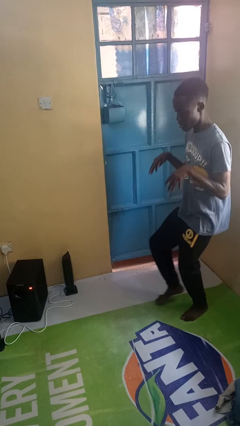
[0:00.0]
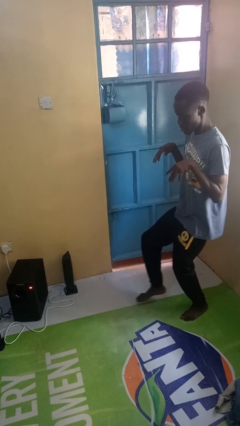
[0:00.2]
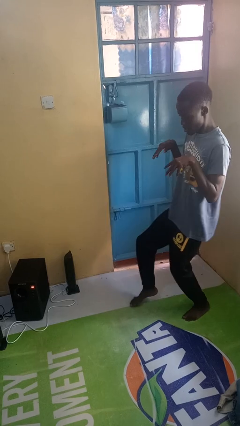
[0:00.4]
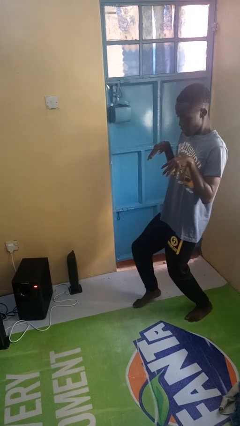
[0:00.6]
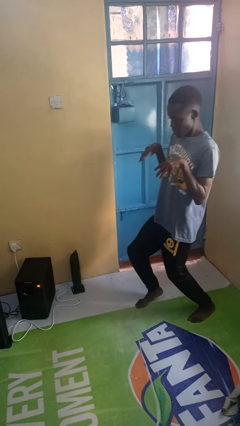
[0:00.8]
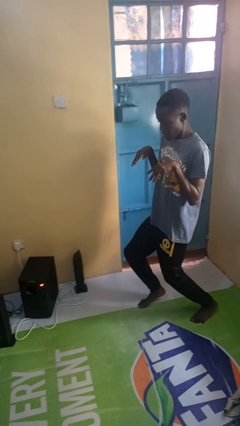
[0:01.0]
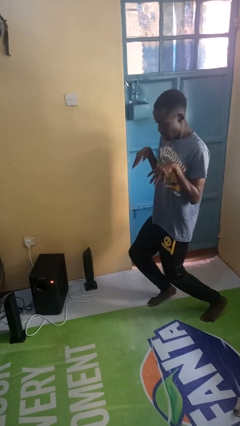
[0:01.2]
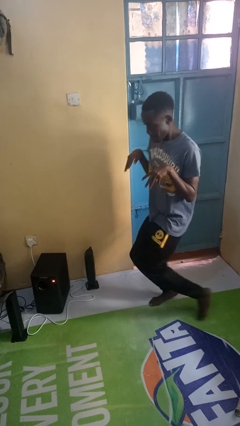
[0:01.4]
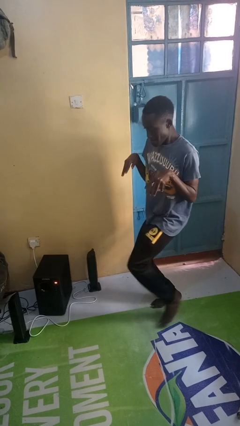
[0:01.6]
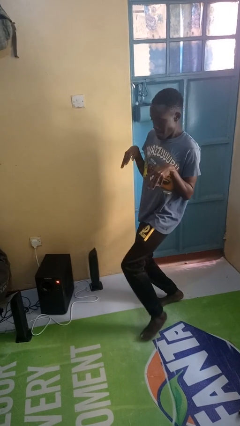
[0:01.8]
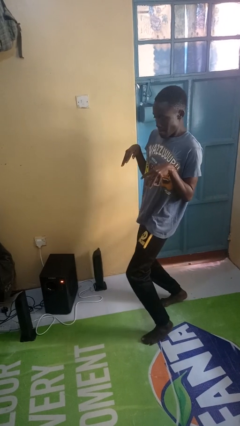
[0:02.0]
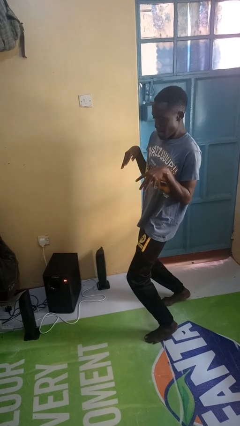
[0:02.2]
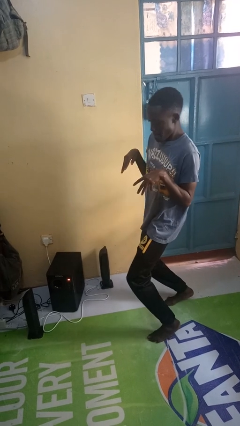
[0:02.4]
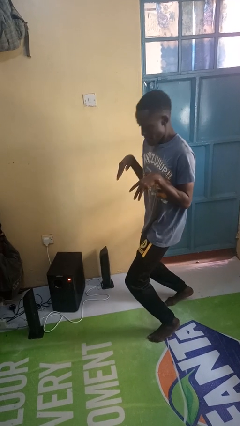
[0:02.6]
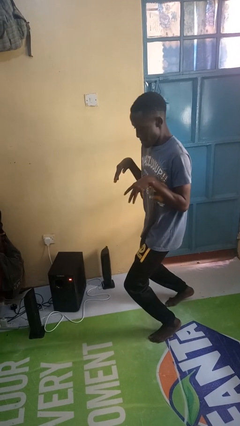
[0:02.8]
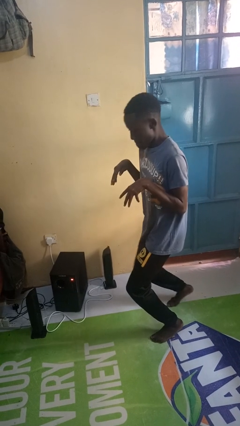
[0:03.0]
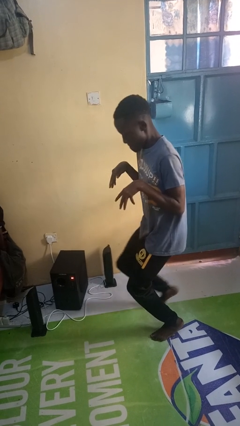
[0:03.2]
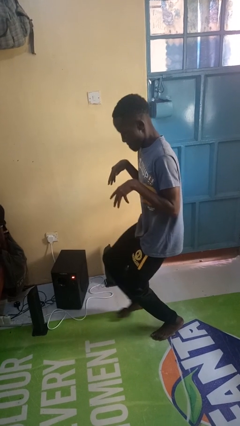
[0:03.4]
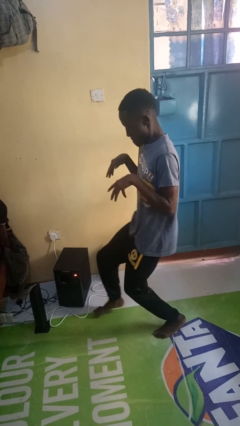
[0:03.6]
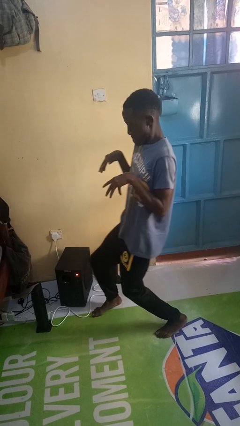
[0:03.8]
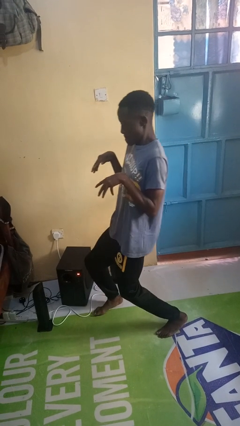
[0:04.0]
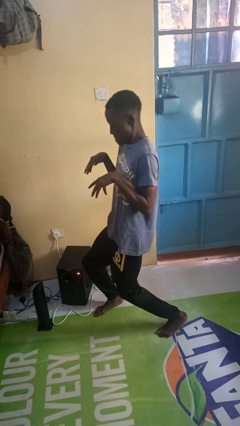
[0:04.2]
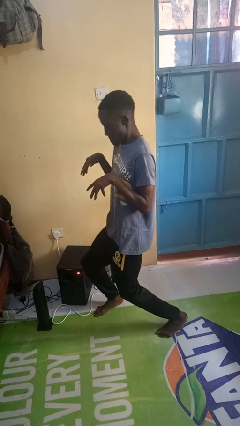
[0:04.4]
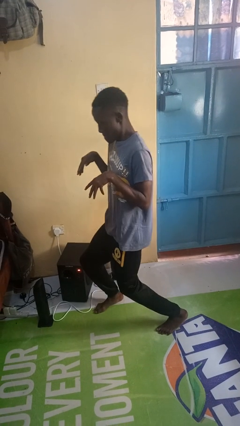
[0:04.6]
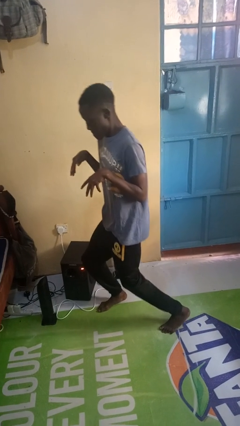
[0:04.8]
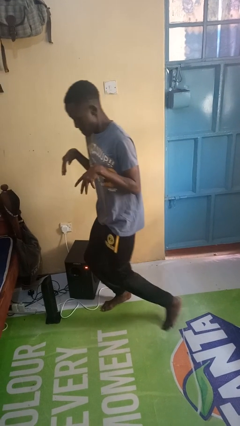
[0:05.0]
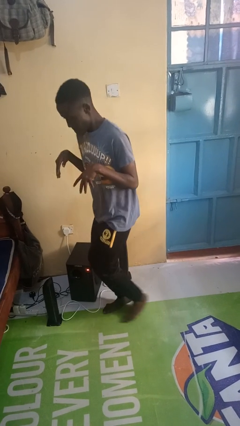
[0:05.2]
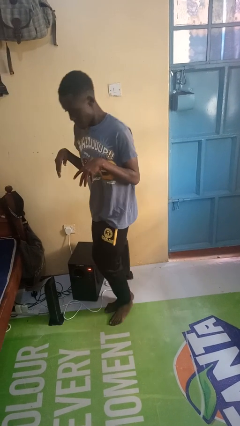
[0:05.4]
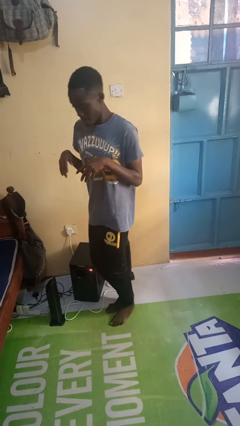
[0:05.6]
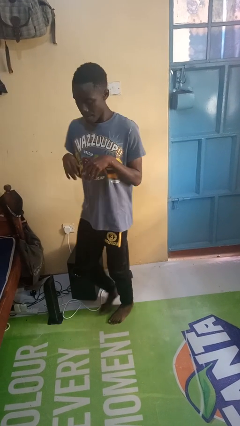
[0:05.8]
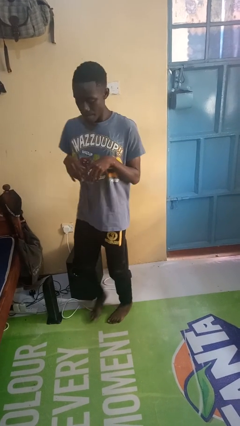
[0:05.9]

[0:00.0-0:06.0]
person walks tiptoe

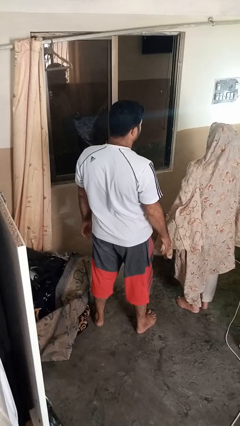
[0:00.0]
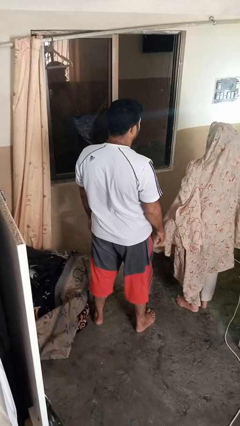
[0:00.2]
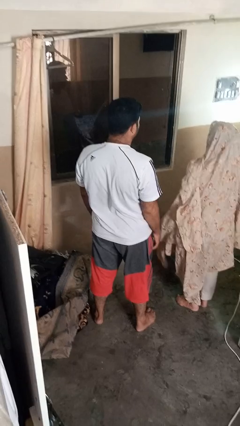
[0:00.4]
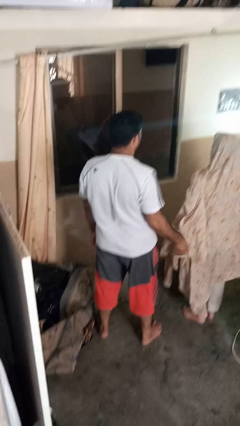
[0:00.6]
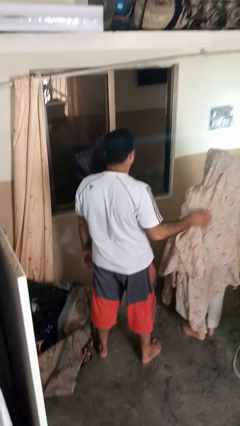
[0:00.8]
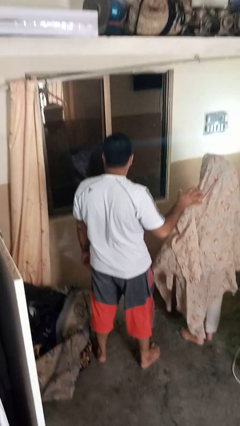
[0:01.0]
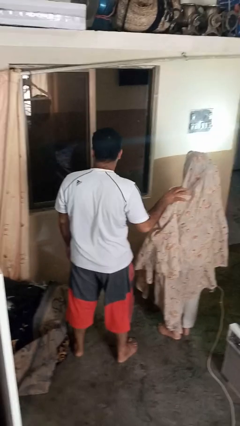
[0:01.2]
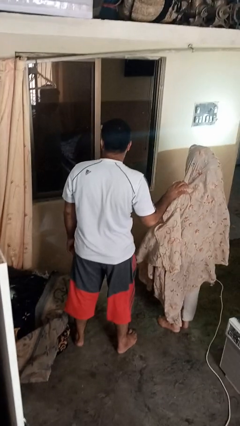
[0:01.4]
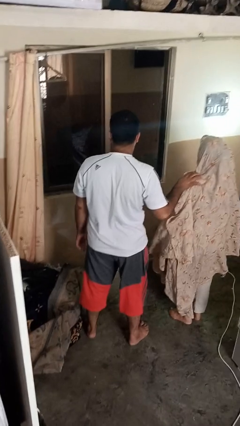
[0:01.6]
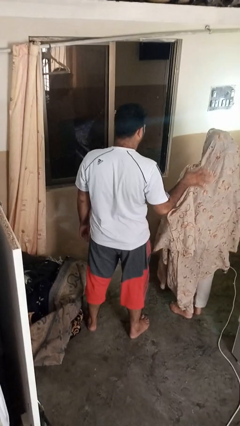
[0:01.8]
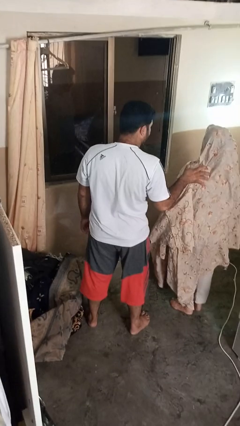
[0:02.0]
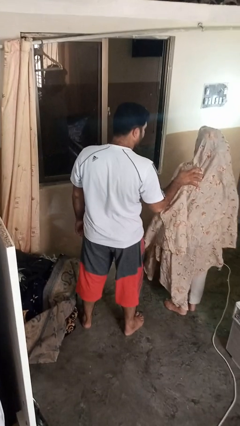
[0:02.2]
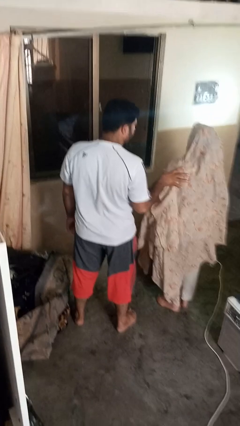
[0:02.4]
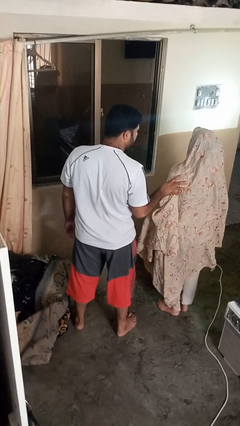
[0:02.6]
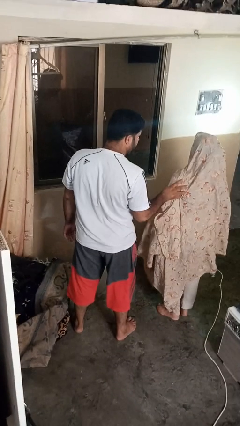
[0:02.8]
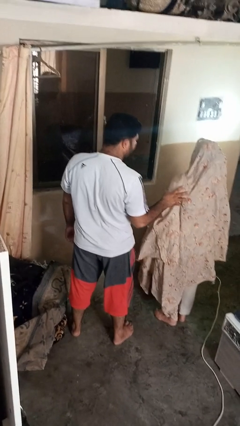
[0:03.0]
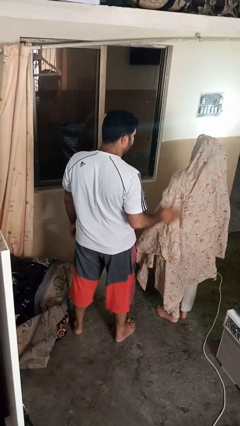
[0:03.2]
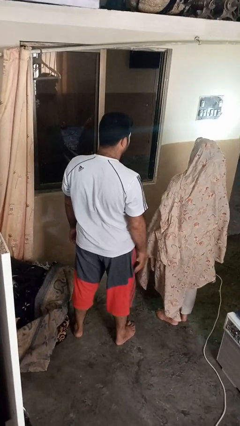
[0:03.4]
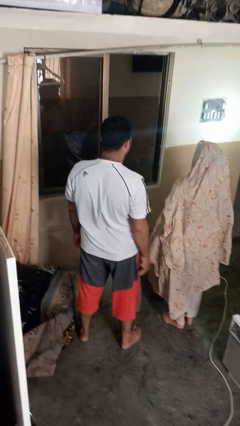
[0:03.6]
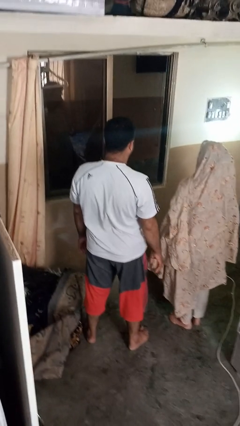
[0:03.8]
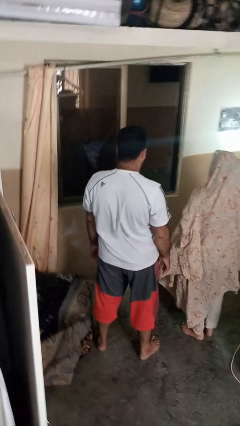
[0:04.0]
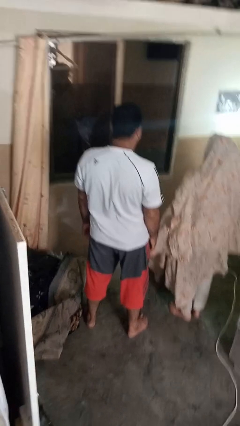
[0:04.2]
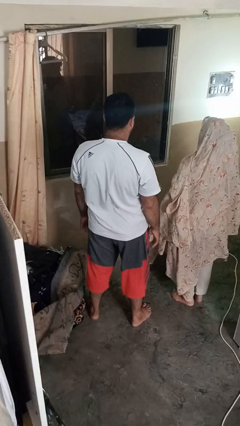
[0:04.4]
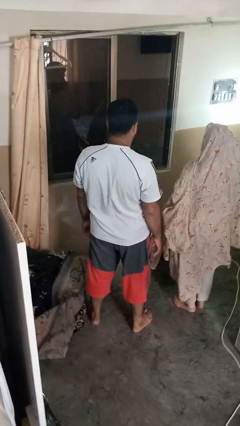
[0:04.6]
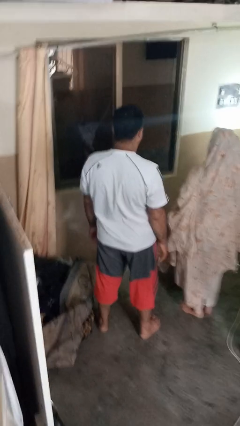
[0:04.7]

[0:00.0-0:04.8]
person grabs person by bicep

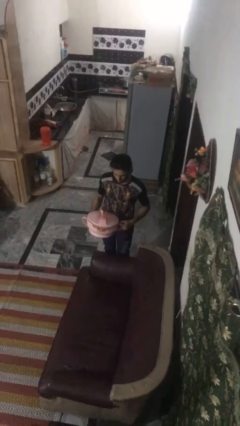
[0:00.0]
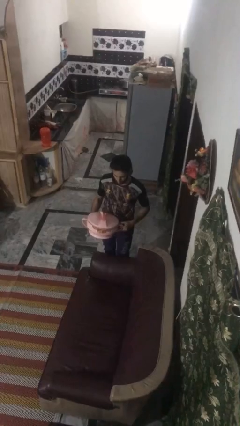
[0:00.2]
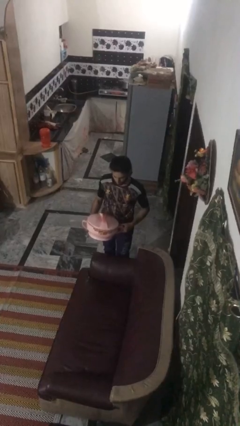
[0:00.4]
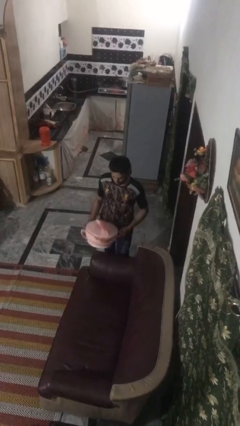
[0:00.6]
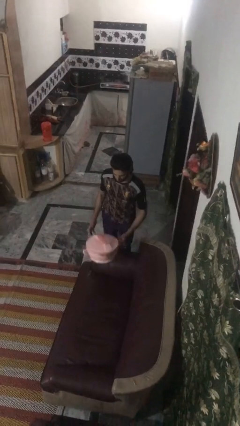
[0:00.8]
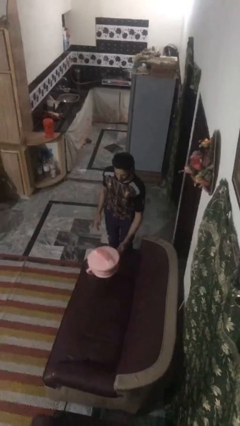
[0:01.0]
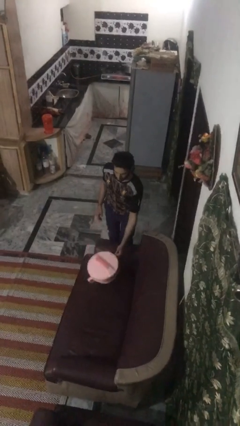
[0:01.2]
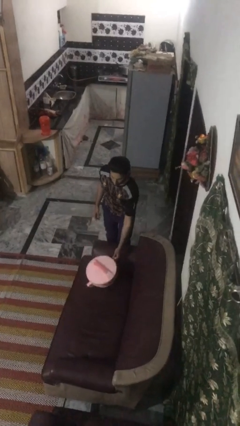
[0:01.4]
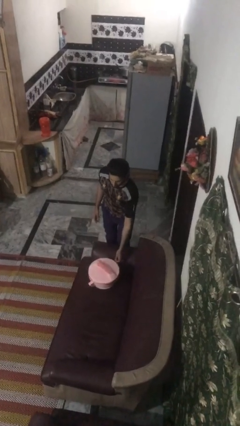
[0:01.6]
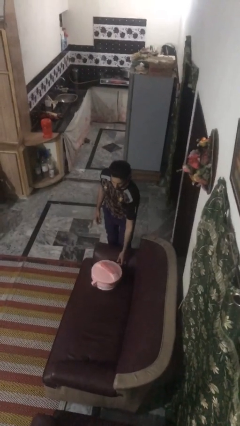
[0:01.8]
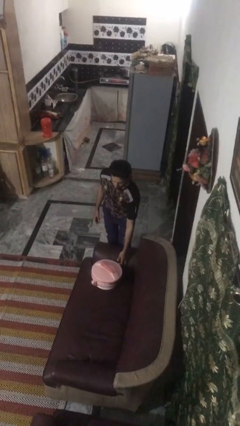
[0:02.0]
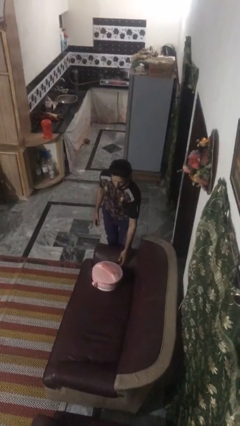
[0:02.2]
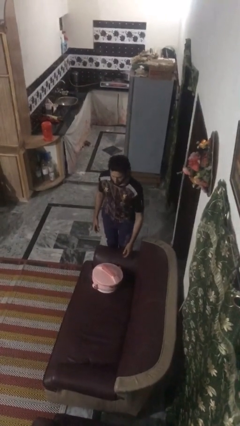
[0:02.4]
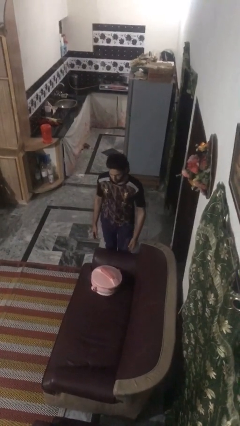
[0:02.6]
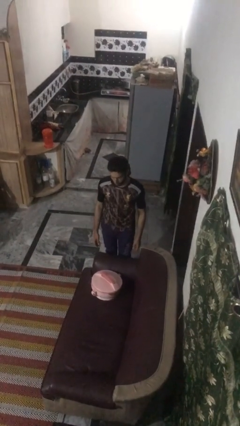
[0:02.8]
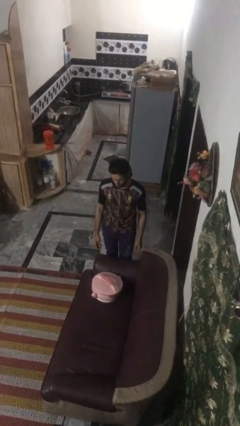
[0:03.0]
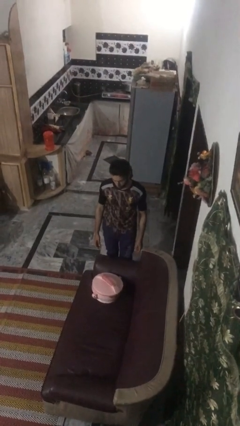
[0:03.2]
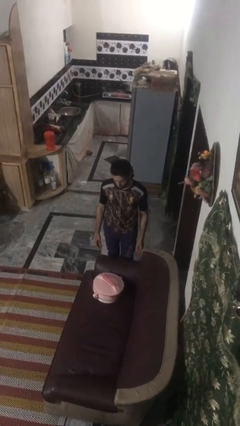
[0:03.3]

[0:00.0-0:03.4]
person puts down object on couch

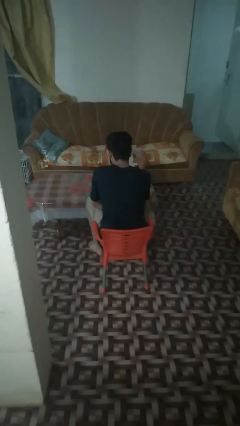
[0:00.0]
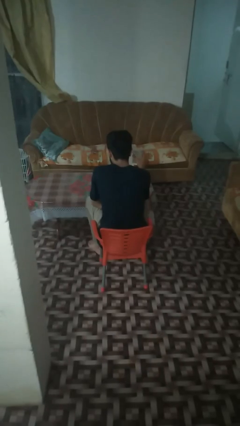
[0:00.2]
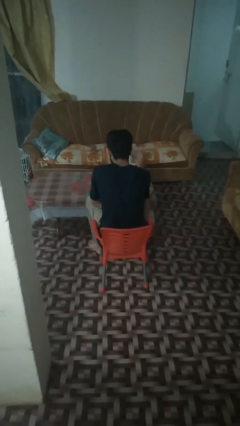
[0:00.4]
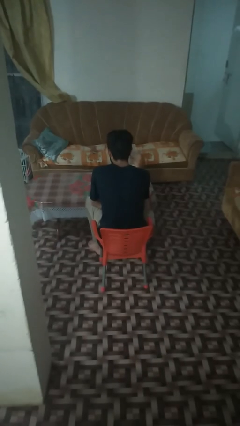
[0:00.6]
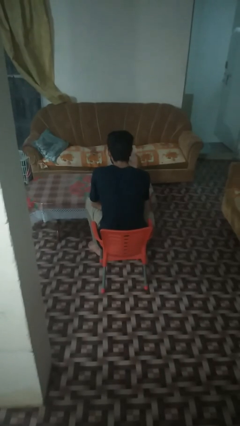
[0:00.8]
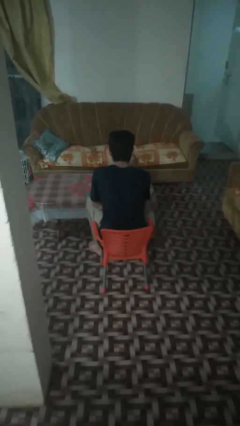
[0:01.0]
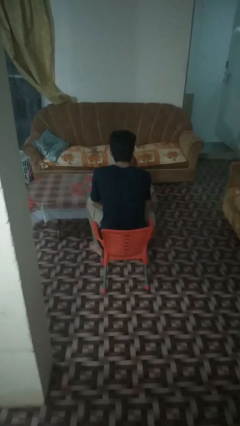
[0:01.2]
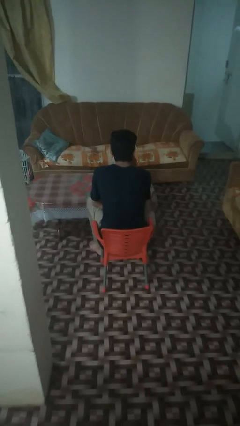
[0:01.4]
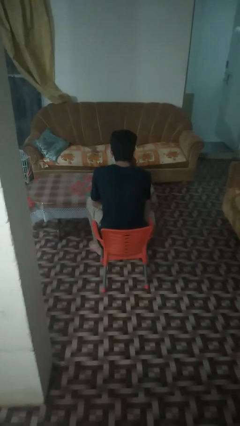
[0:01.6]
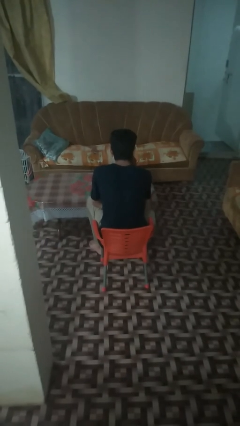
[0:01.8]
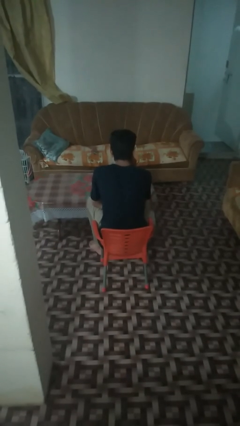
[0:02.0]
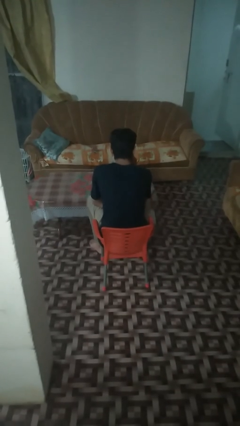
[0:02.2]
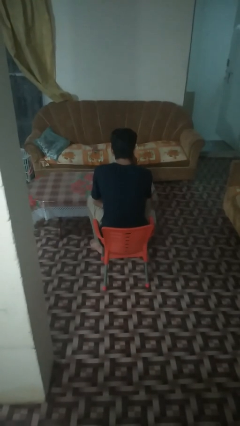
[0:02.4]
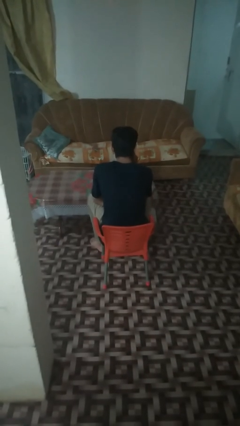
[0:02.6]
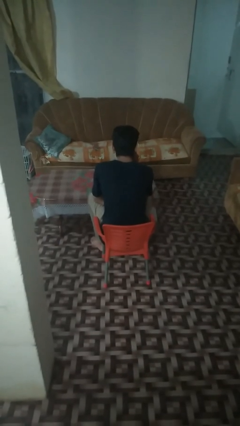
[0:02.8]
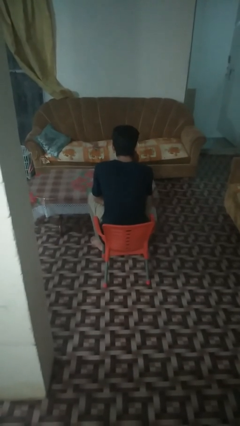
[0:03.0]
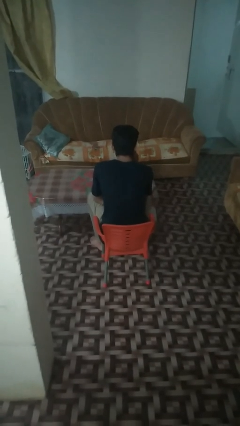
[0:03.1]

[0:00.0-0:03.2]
person drinks from shotglass

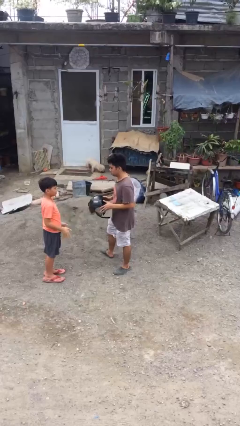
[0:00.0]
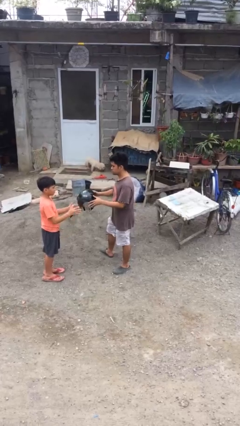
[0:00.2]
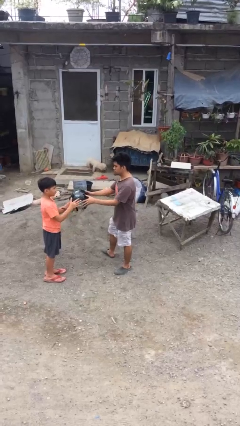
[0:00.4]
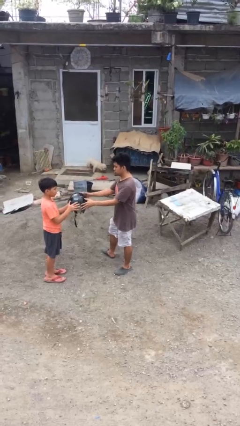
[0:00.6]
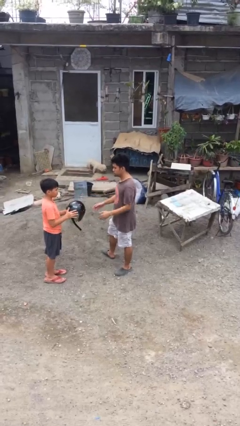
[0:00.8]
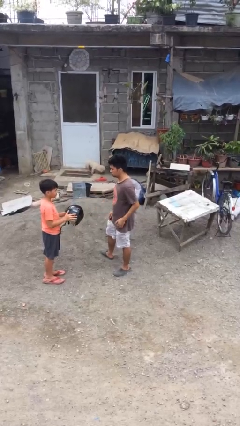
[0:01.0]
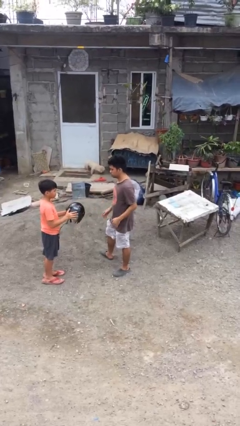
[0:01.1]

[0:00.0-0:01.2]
person transfers object to person
